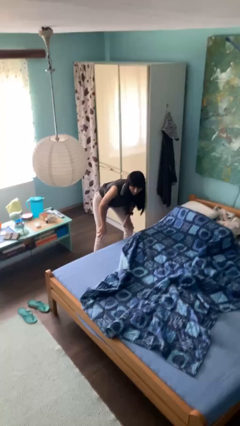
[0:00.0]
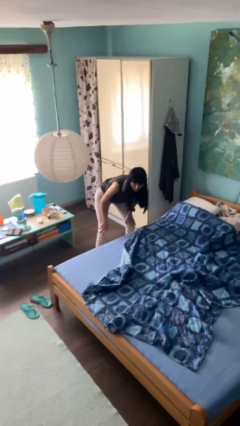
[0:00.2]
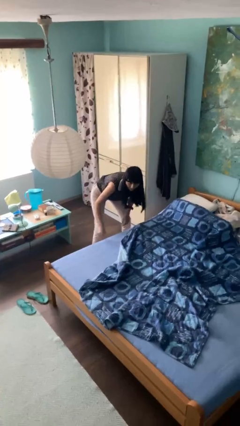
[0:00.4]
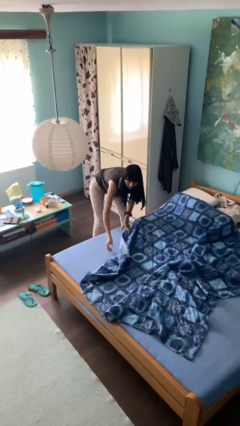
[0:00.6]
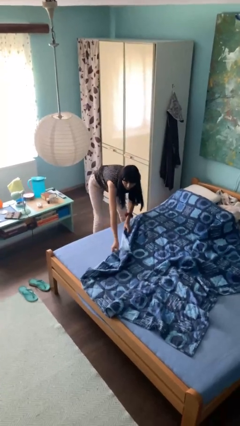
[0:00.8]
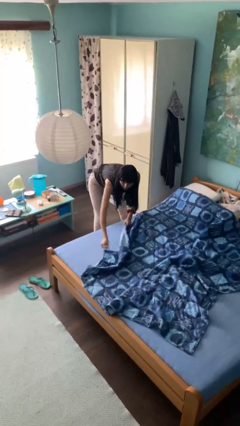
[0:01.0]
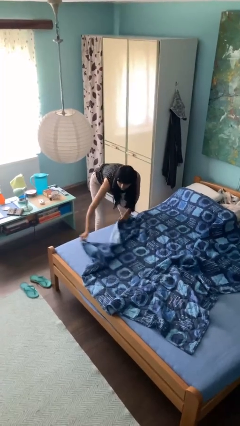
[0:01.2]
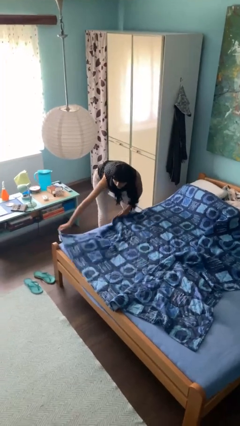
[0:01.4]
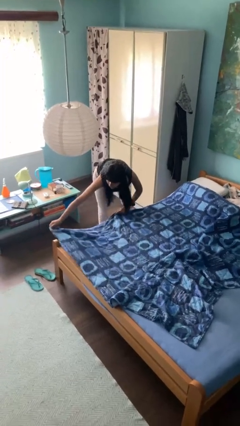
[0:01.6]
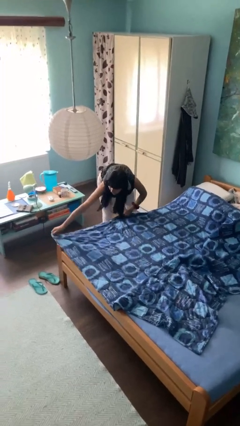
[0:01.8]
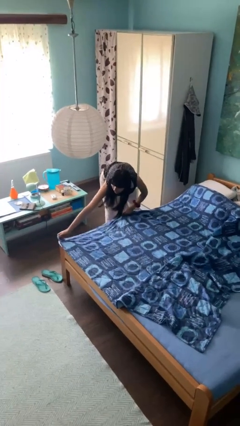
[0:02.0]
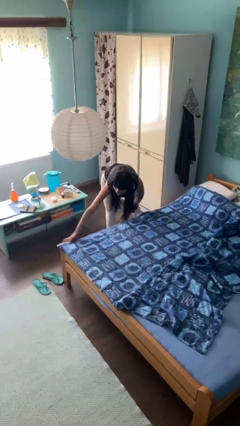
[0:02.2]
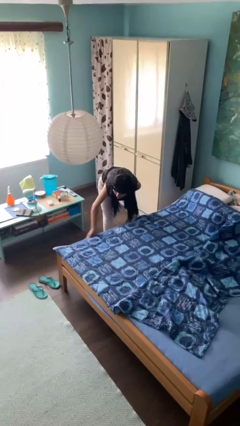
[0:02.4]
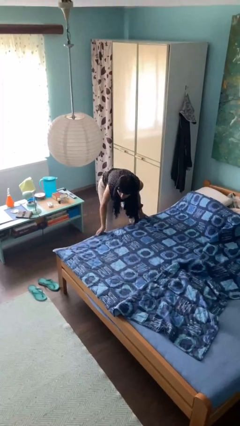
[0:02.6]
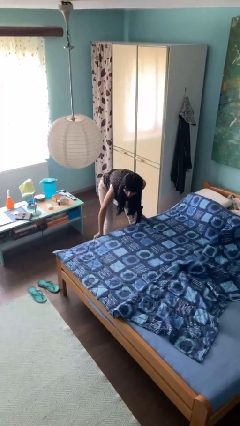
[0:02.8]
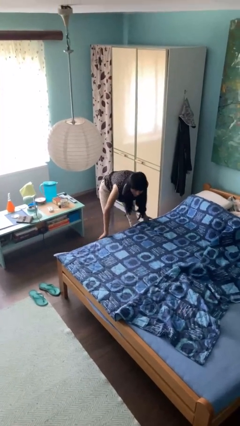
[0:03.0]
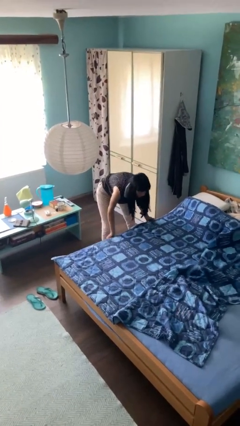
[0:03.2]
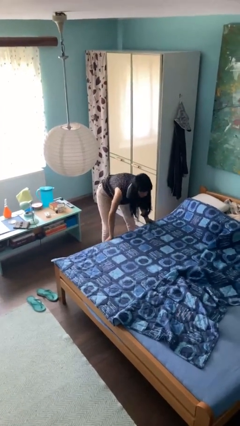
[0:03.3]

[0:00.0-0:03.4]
person makes bed

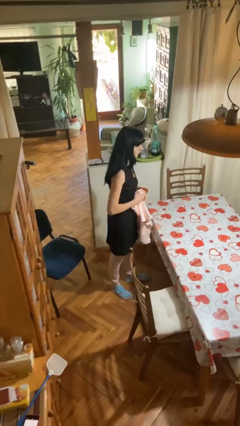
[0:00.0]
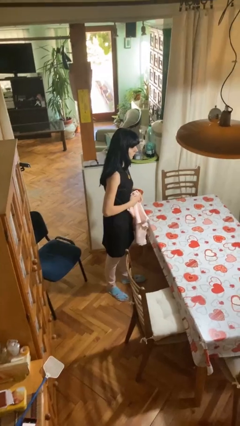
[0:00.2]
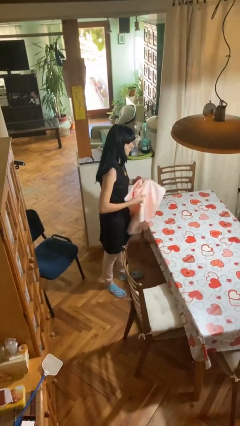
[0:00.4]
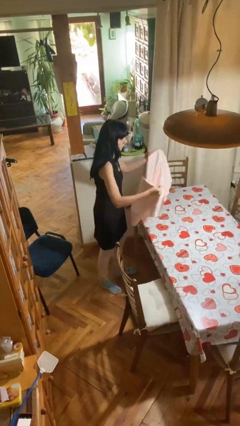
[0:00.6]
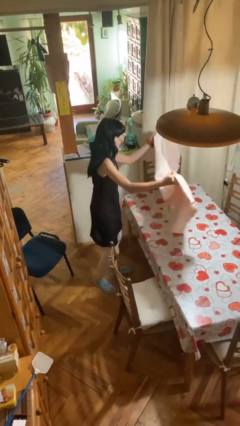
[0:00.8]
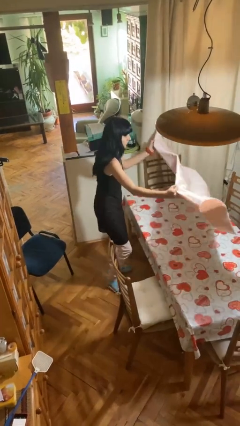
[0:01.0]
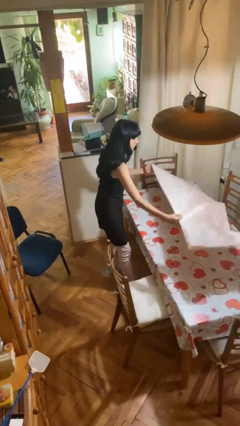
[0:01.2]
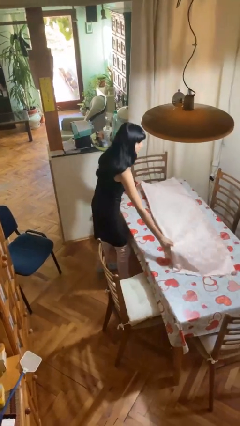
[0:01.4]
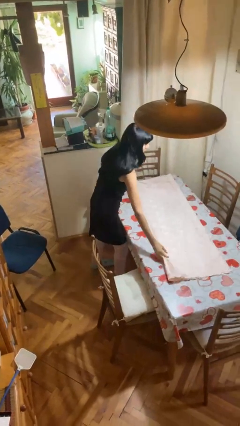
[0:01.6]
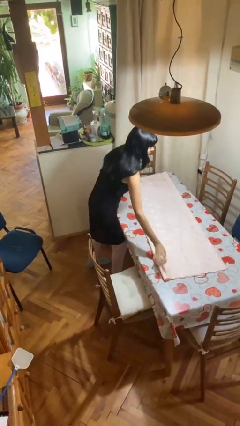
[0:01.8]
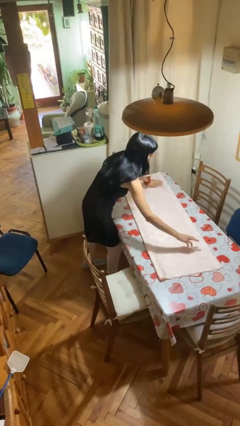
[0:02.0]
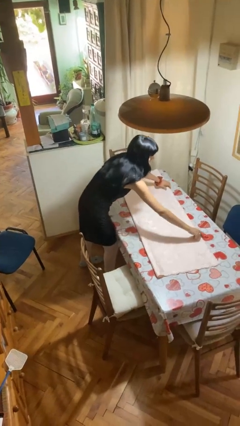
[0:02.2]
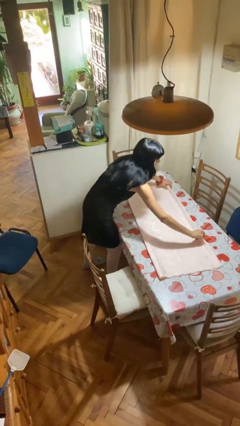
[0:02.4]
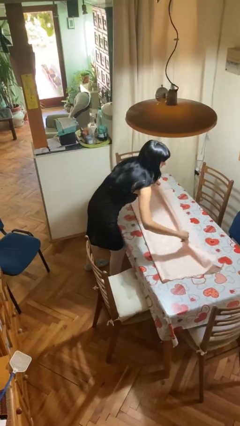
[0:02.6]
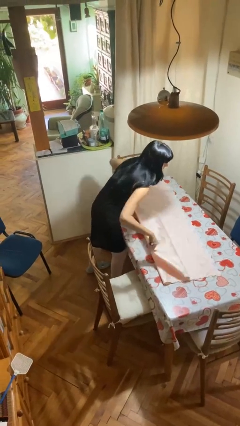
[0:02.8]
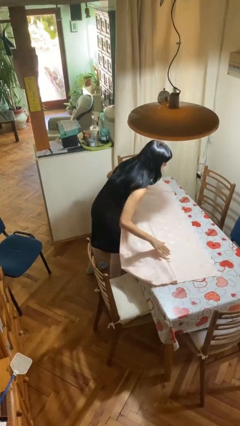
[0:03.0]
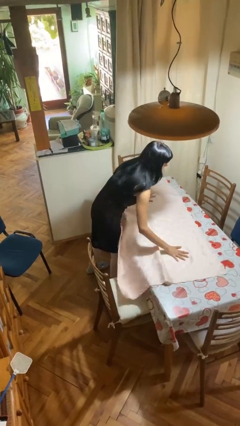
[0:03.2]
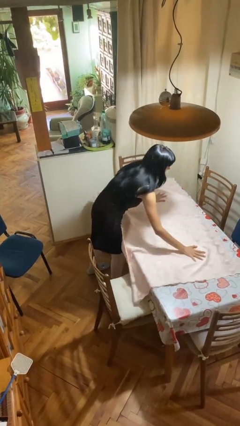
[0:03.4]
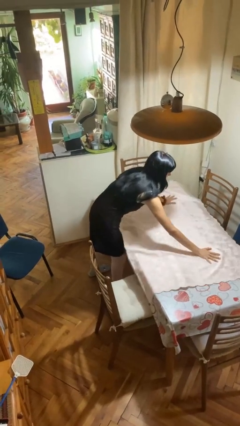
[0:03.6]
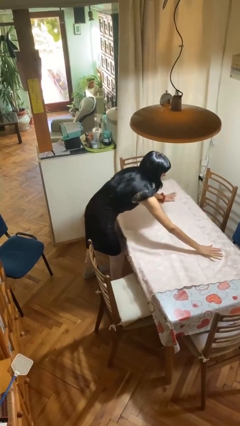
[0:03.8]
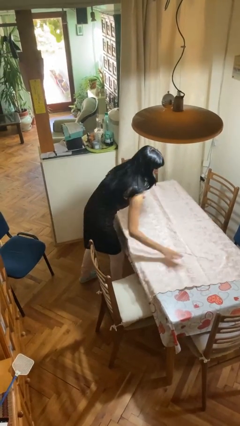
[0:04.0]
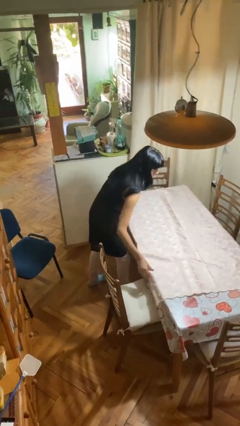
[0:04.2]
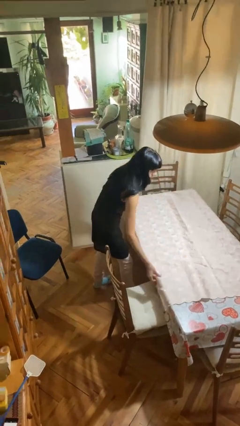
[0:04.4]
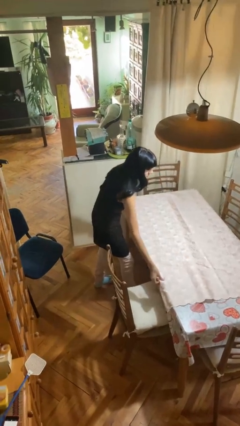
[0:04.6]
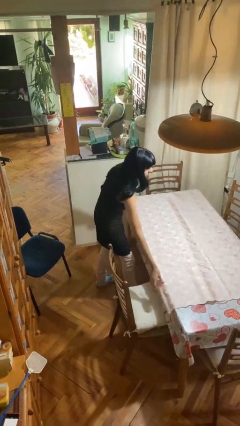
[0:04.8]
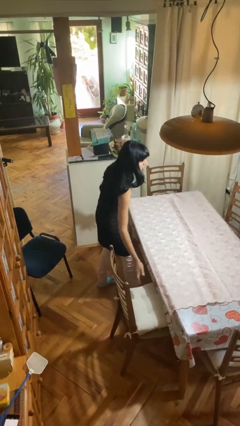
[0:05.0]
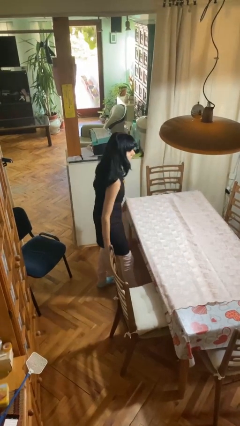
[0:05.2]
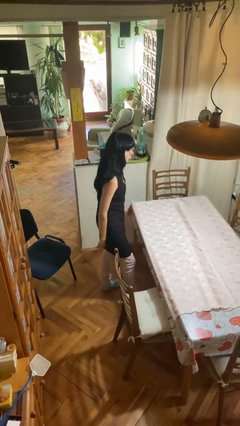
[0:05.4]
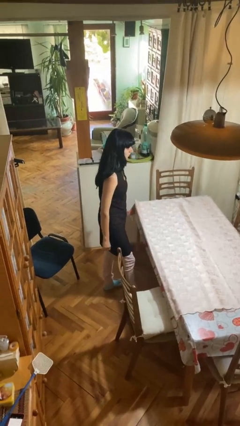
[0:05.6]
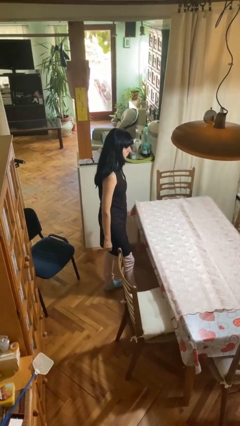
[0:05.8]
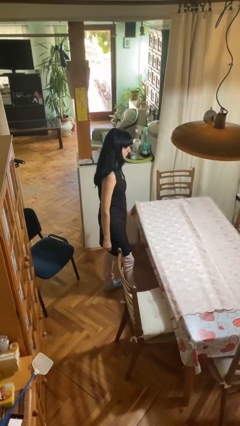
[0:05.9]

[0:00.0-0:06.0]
person spreads tablecloth

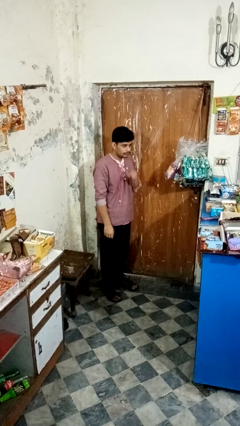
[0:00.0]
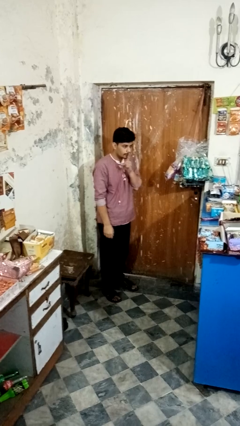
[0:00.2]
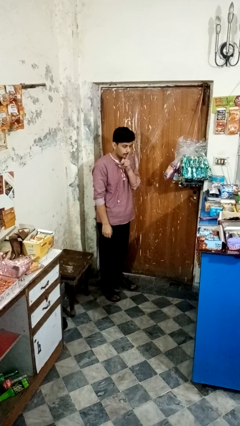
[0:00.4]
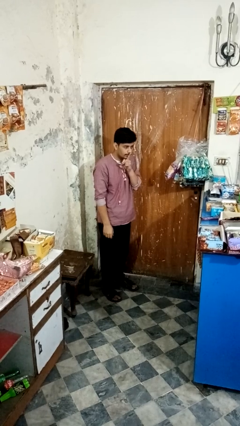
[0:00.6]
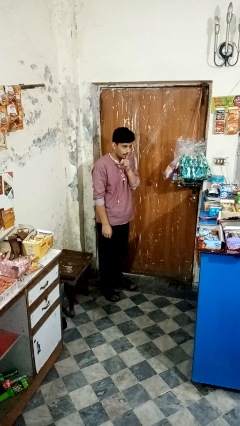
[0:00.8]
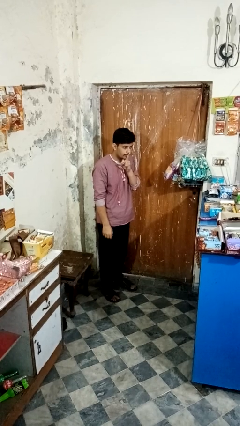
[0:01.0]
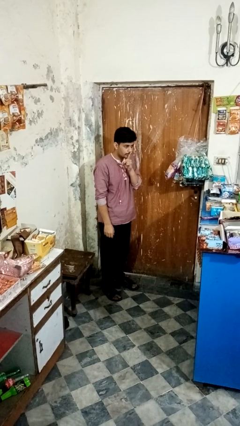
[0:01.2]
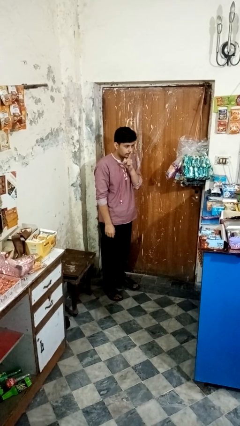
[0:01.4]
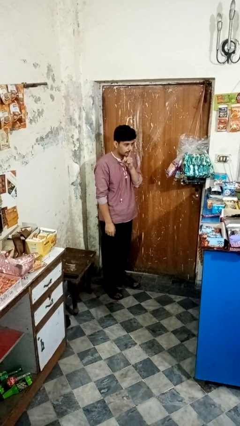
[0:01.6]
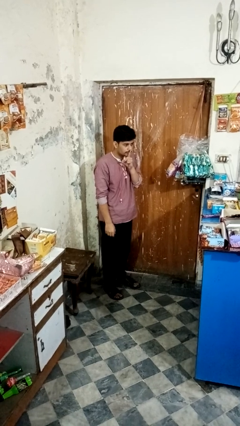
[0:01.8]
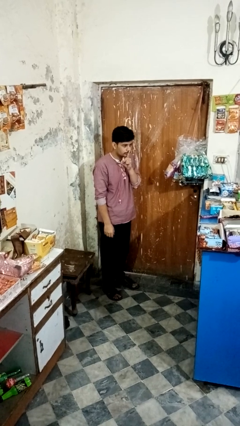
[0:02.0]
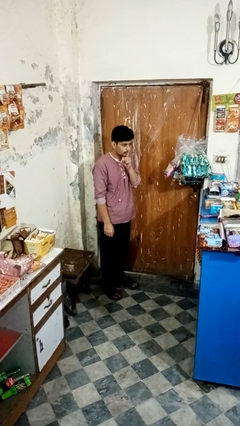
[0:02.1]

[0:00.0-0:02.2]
person gestures be quiet

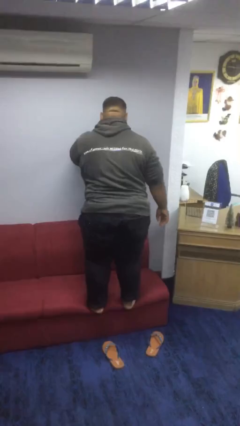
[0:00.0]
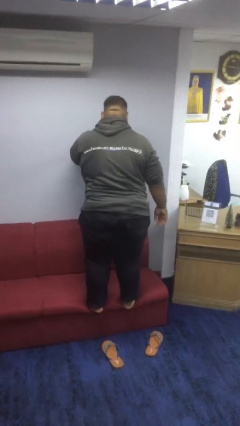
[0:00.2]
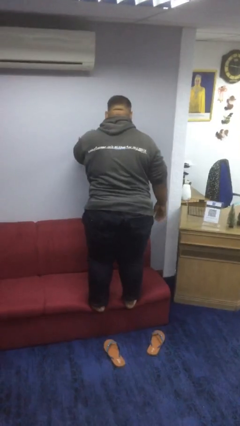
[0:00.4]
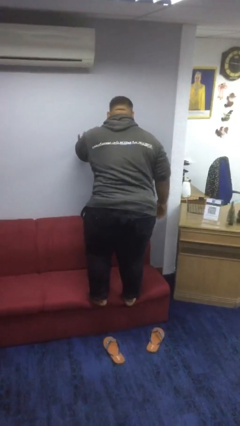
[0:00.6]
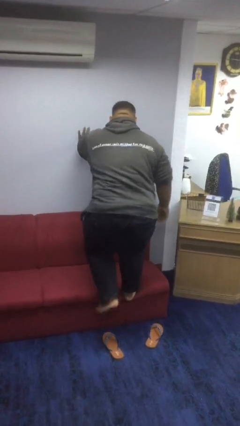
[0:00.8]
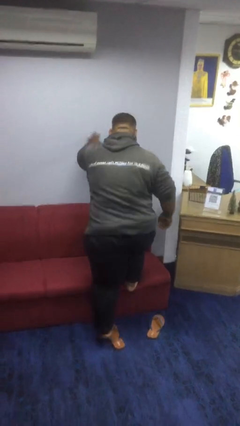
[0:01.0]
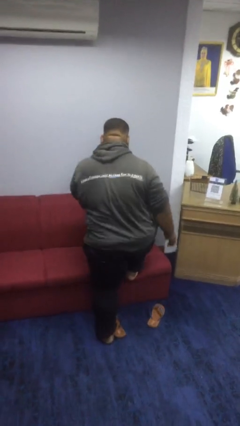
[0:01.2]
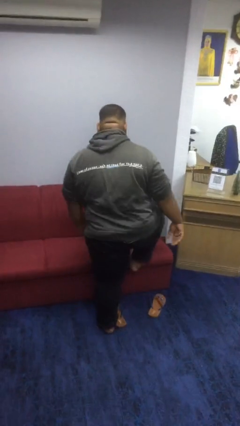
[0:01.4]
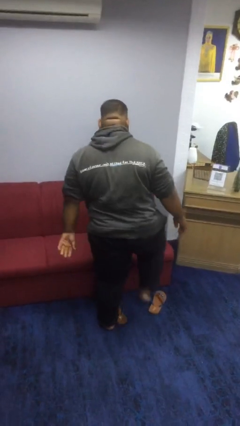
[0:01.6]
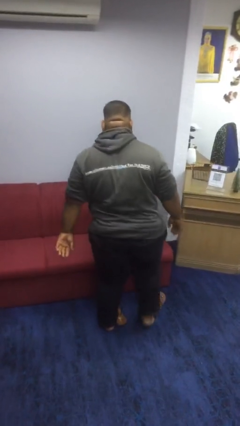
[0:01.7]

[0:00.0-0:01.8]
person climbs off couch

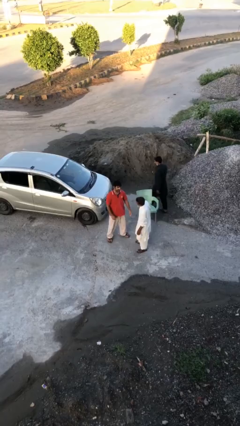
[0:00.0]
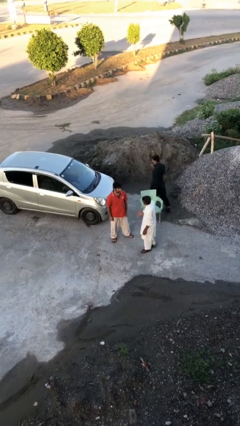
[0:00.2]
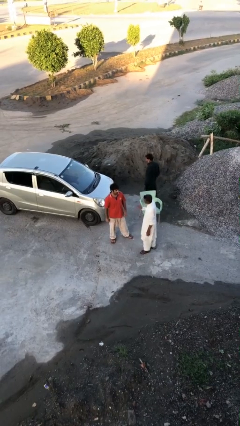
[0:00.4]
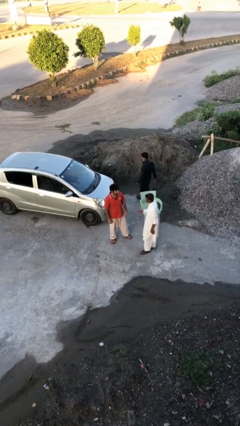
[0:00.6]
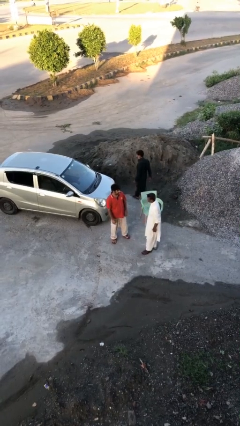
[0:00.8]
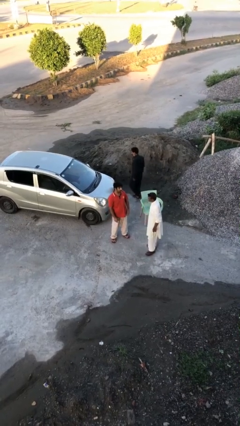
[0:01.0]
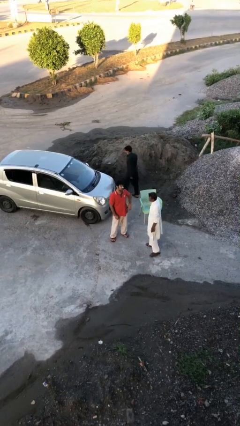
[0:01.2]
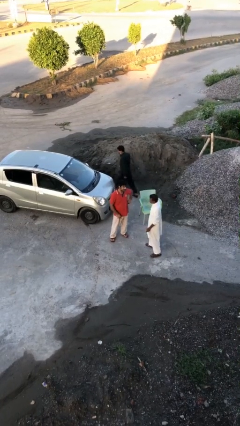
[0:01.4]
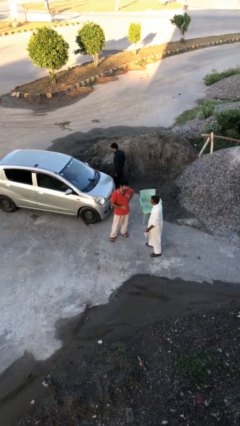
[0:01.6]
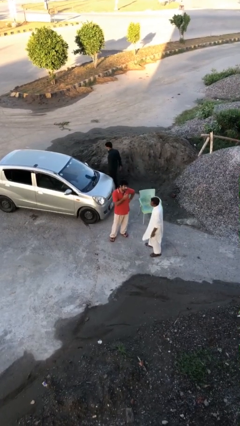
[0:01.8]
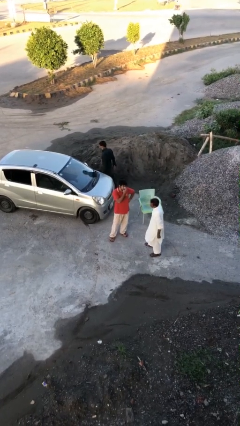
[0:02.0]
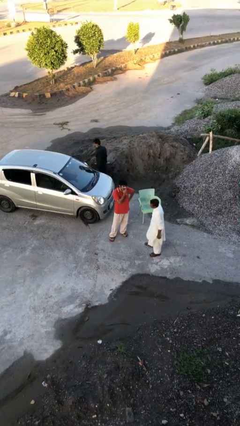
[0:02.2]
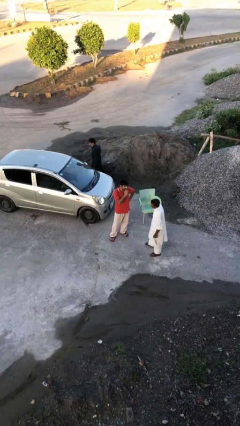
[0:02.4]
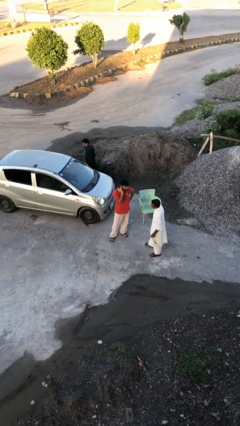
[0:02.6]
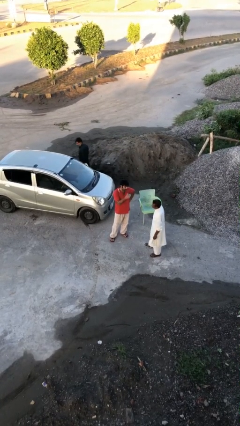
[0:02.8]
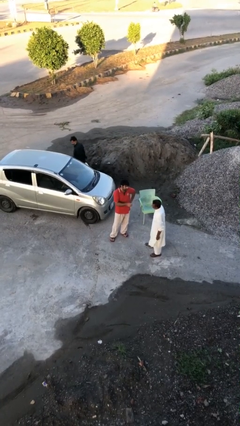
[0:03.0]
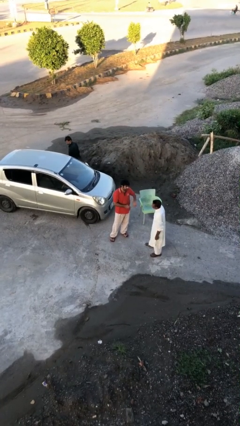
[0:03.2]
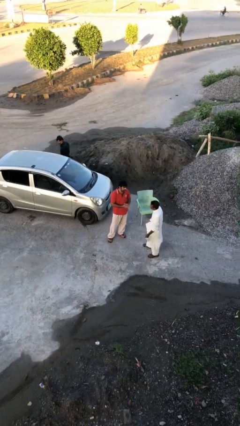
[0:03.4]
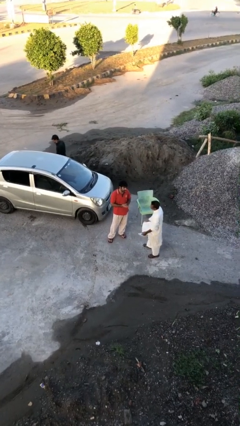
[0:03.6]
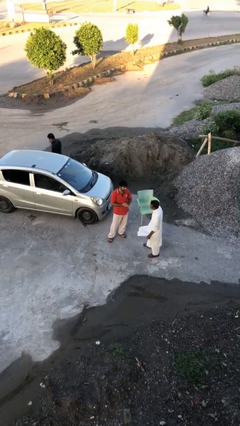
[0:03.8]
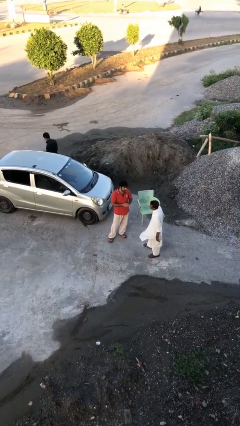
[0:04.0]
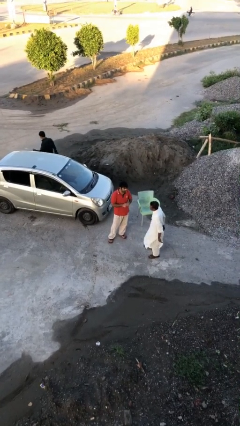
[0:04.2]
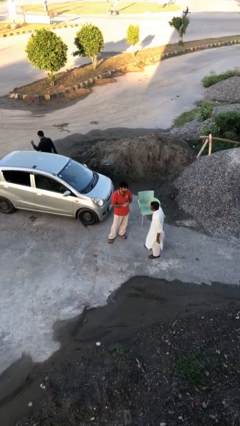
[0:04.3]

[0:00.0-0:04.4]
person talks to person

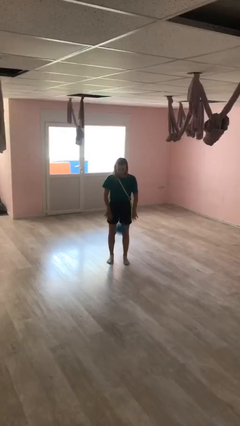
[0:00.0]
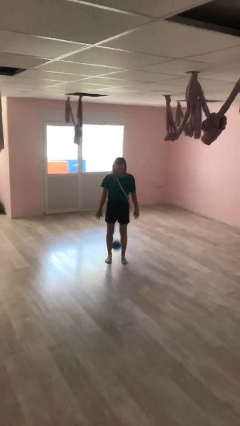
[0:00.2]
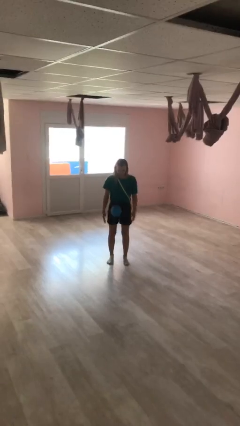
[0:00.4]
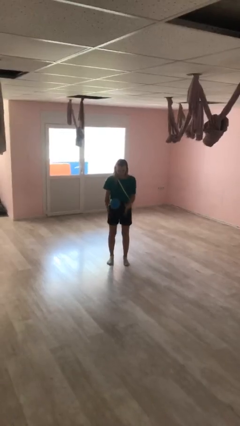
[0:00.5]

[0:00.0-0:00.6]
person bounces ball on floor
